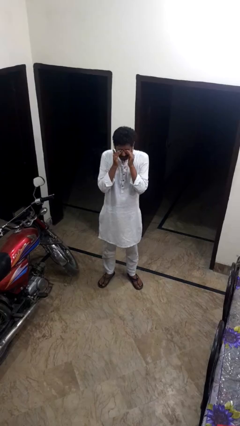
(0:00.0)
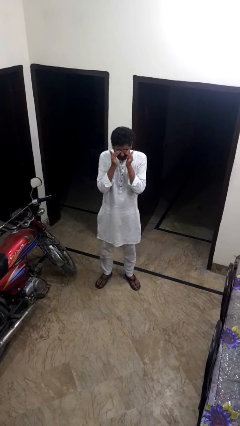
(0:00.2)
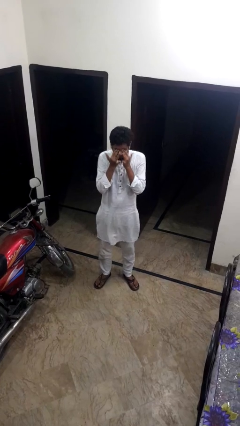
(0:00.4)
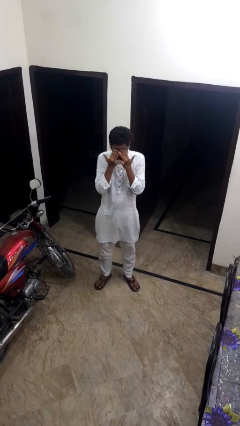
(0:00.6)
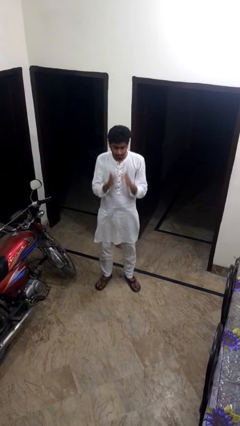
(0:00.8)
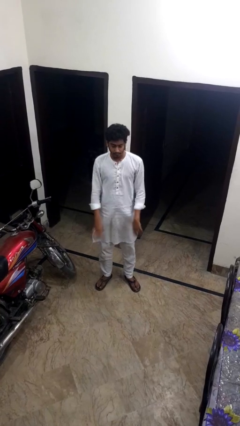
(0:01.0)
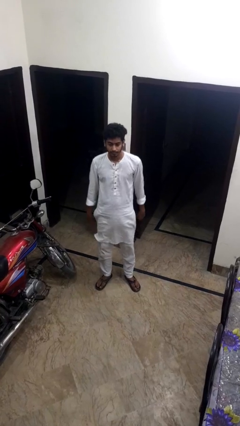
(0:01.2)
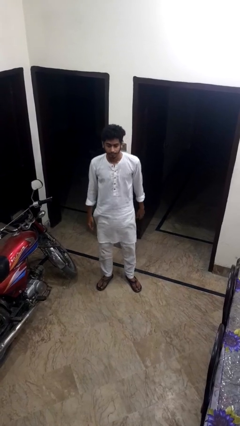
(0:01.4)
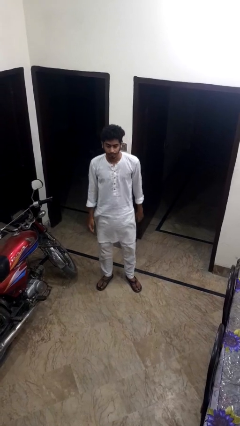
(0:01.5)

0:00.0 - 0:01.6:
person rubs eyes

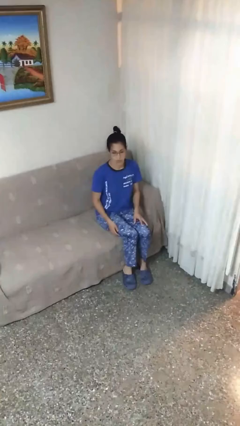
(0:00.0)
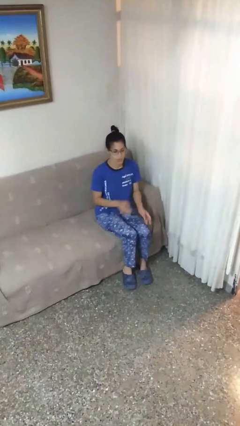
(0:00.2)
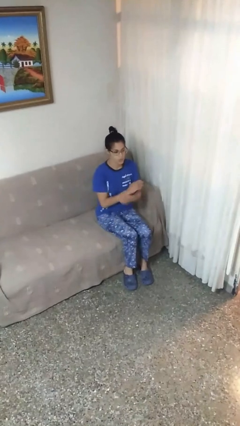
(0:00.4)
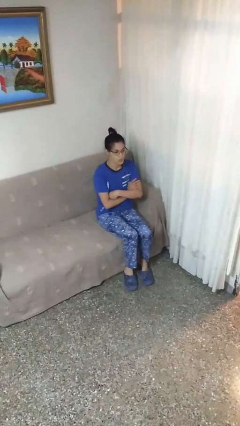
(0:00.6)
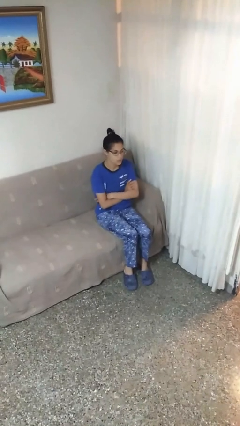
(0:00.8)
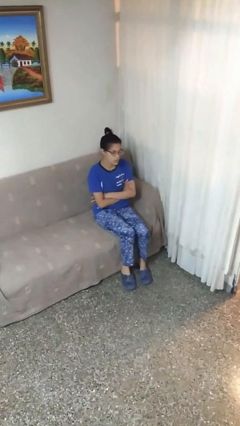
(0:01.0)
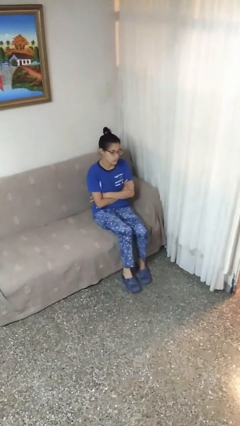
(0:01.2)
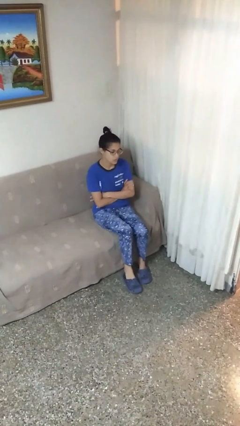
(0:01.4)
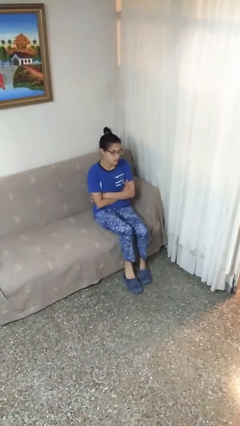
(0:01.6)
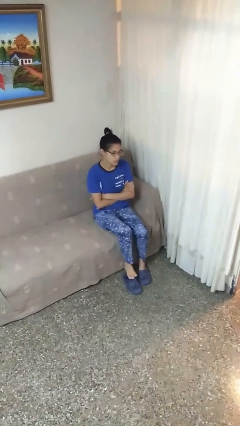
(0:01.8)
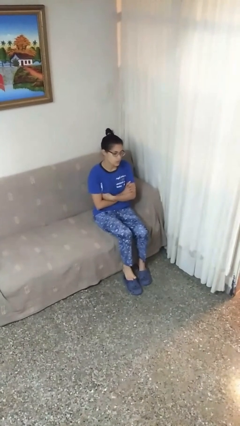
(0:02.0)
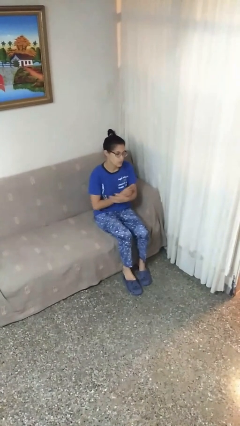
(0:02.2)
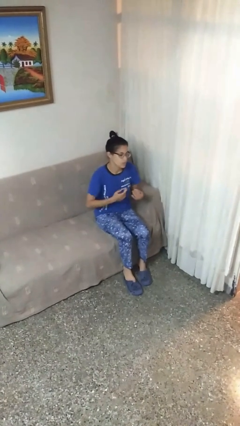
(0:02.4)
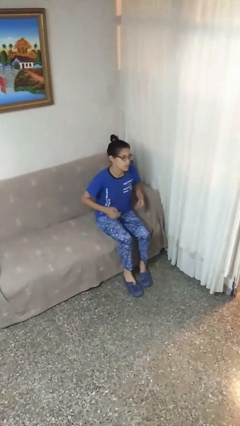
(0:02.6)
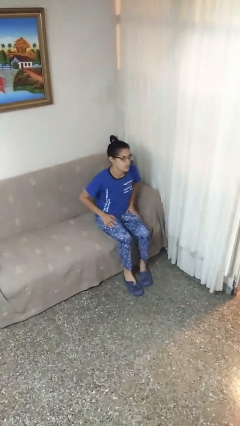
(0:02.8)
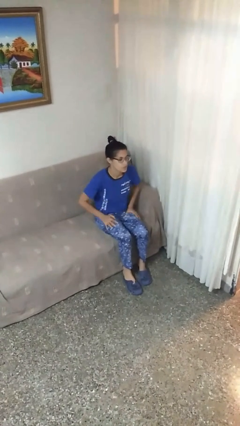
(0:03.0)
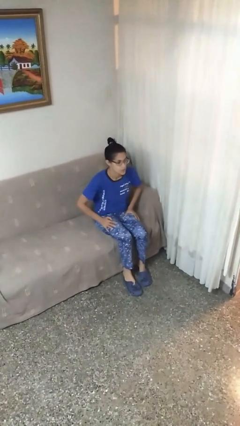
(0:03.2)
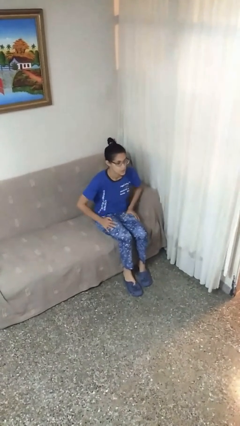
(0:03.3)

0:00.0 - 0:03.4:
person crosses arms

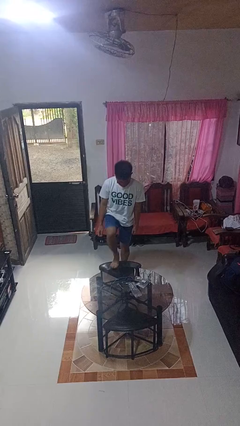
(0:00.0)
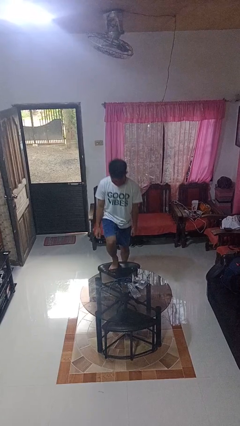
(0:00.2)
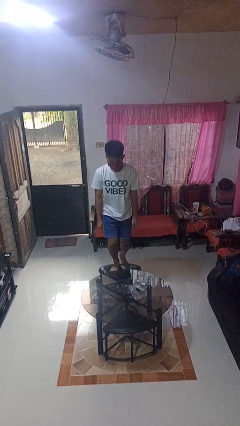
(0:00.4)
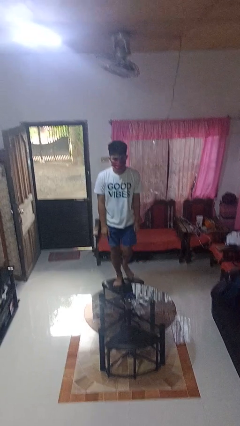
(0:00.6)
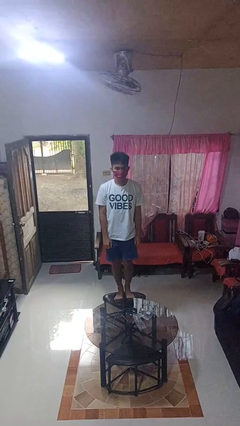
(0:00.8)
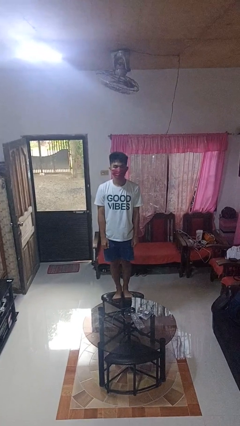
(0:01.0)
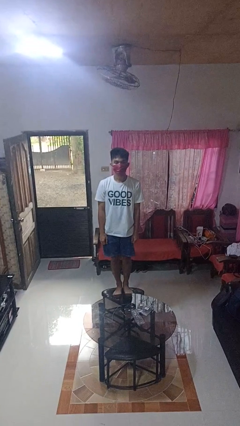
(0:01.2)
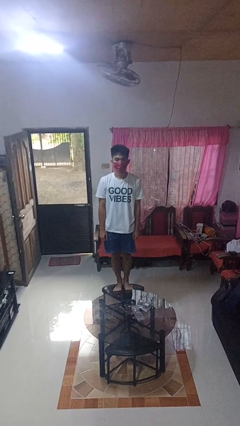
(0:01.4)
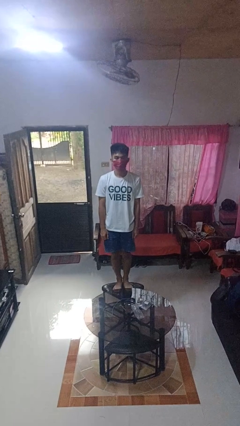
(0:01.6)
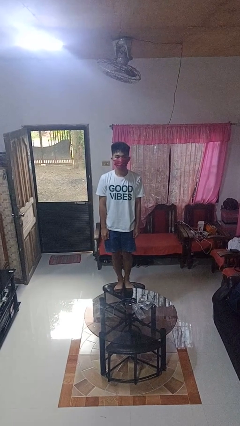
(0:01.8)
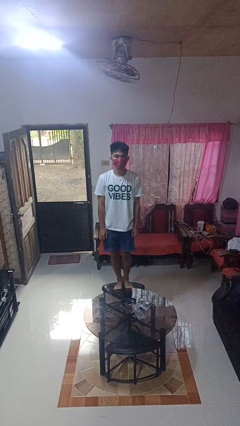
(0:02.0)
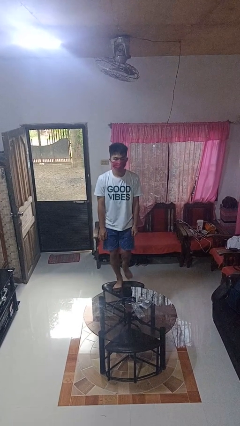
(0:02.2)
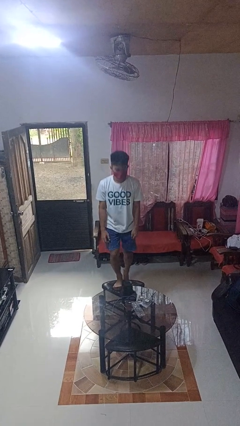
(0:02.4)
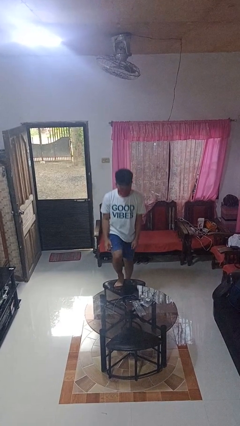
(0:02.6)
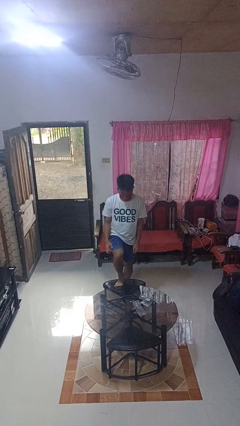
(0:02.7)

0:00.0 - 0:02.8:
person climbs on chair

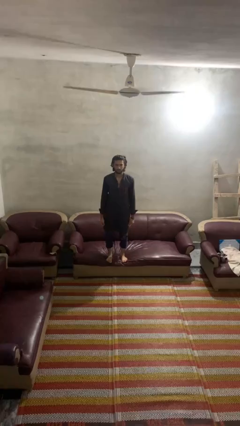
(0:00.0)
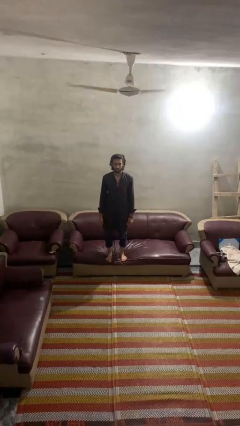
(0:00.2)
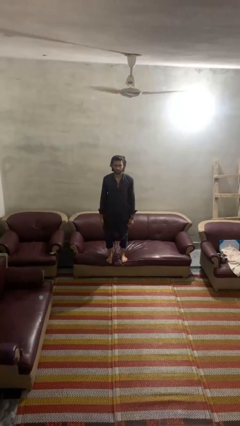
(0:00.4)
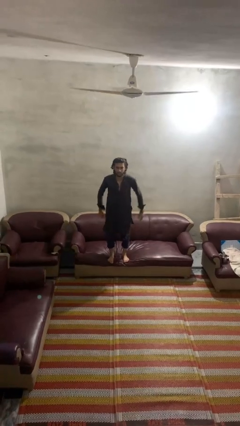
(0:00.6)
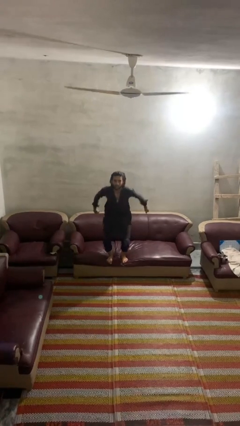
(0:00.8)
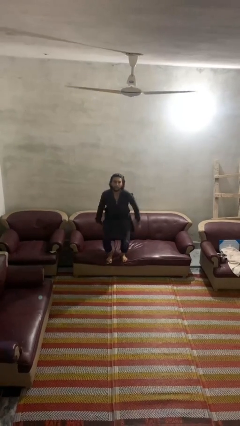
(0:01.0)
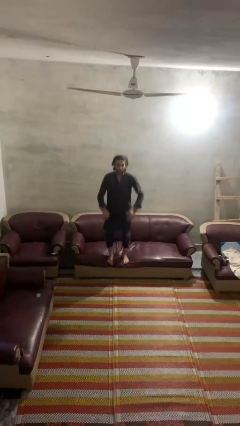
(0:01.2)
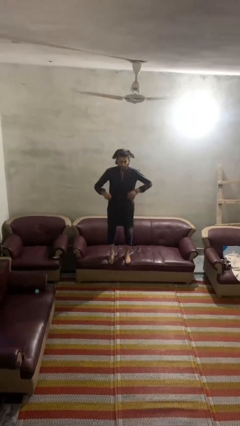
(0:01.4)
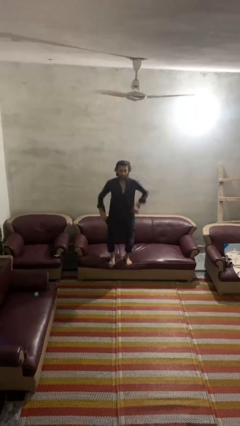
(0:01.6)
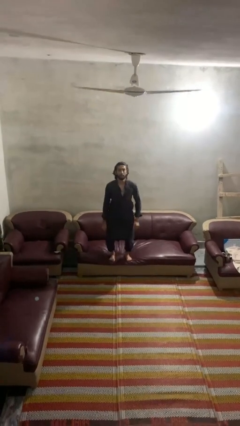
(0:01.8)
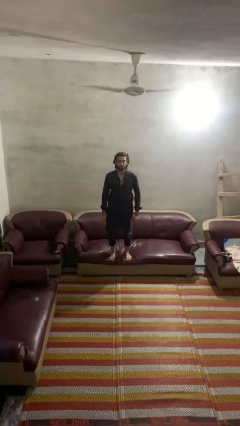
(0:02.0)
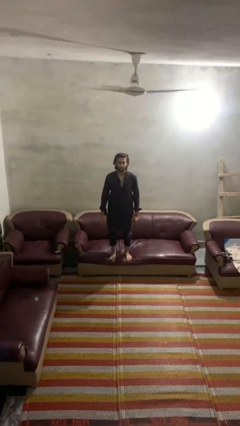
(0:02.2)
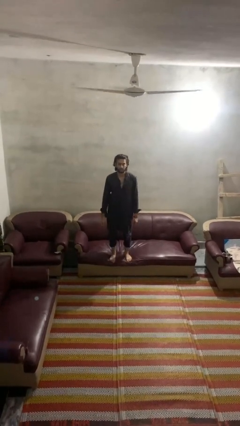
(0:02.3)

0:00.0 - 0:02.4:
person jumps on couch

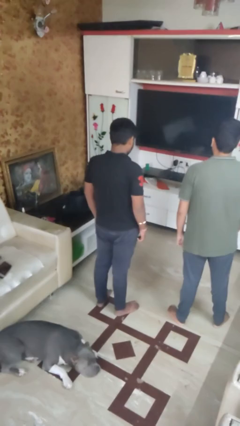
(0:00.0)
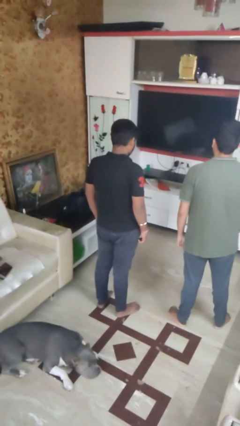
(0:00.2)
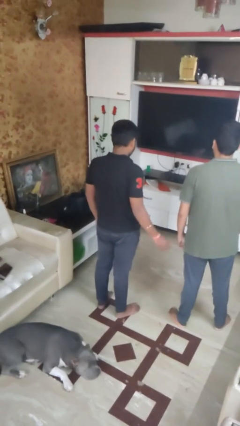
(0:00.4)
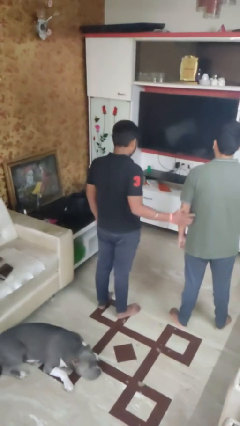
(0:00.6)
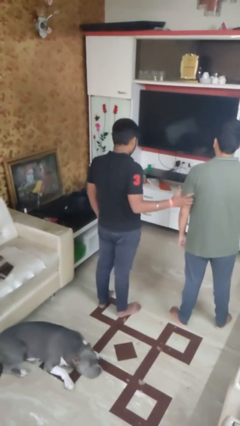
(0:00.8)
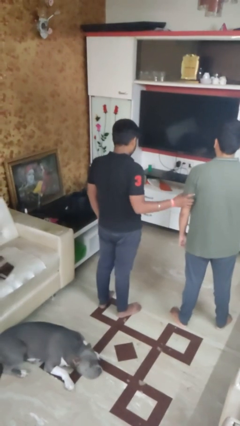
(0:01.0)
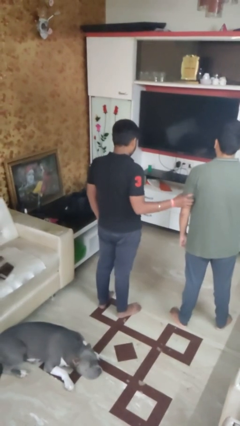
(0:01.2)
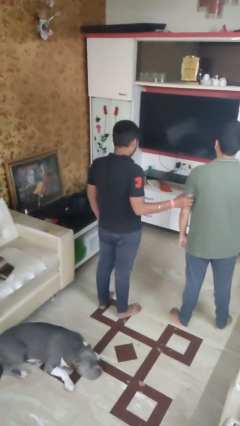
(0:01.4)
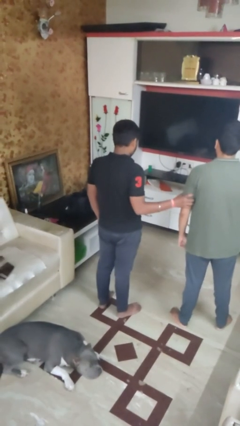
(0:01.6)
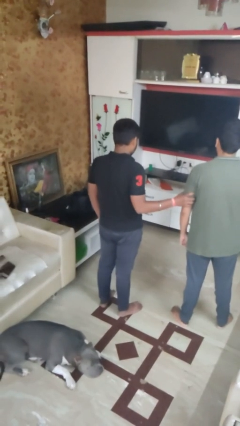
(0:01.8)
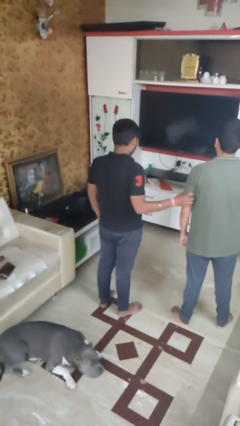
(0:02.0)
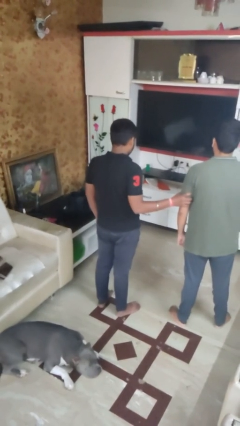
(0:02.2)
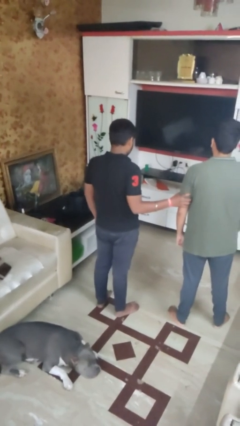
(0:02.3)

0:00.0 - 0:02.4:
person grabs person by bicep

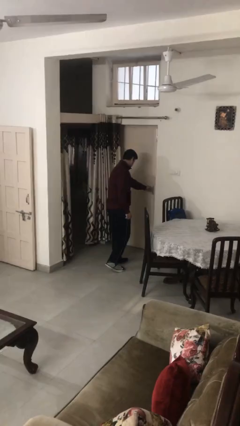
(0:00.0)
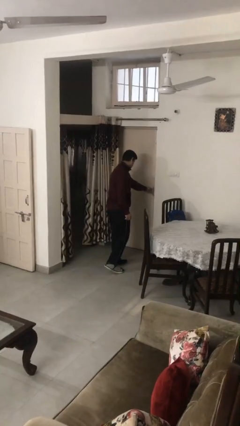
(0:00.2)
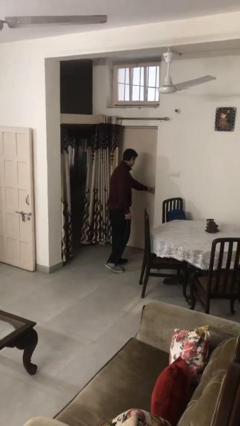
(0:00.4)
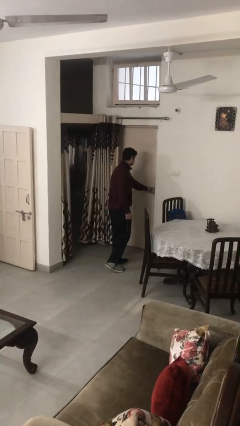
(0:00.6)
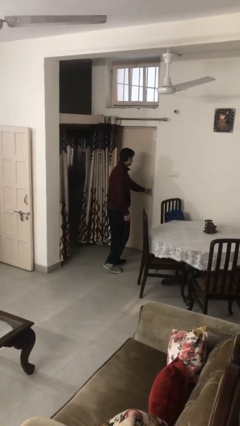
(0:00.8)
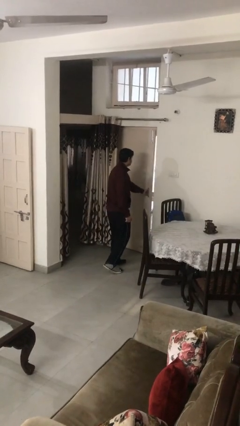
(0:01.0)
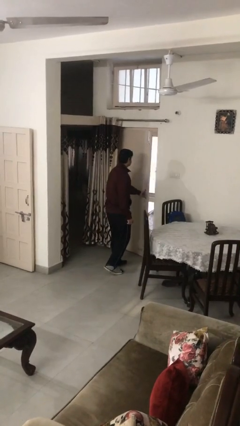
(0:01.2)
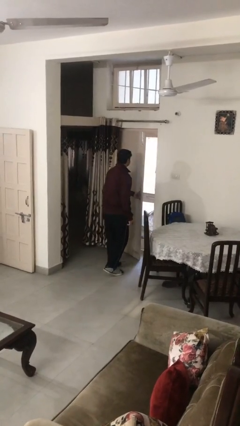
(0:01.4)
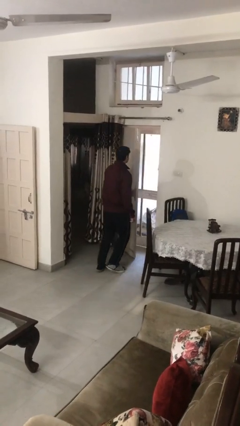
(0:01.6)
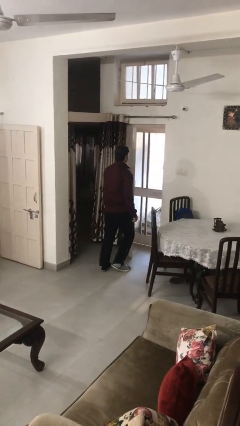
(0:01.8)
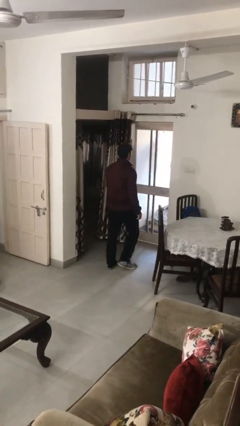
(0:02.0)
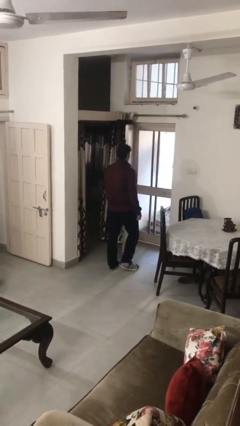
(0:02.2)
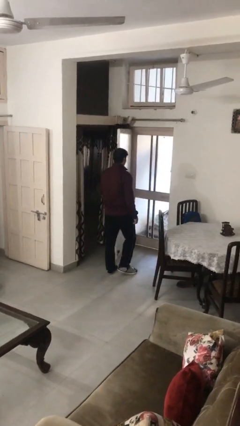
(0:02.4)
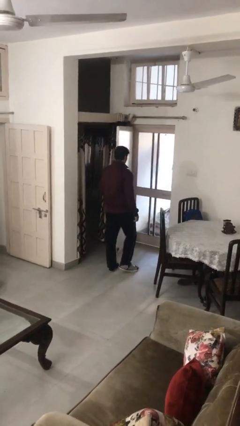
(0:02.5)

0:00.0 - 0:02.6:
person opens facility door

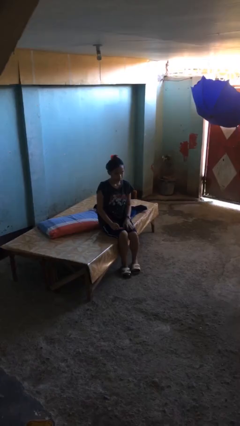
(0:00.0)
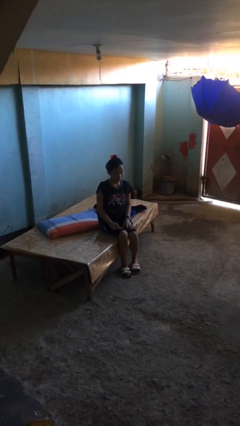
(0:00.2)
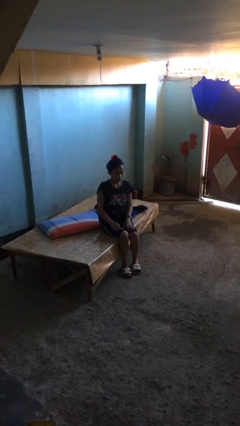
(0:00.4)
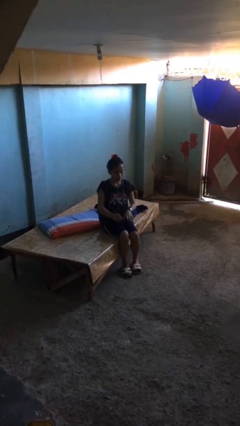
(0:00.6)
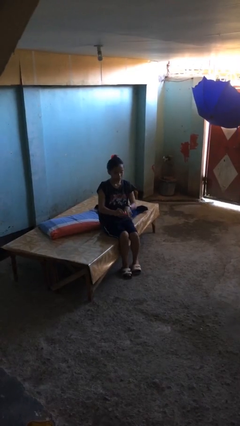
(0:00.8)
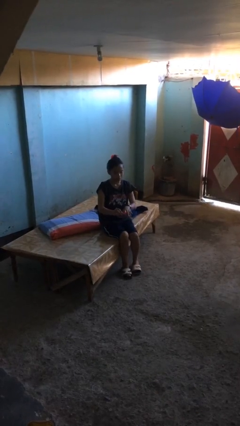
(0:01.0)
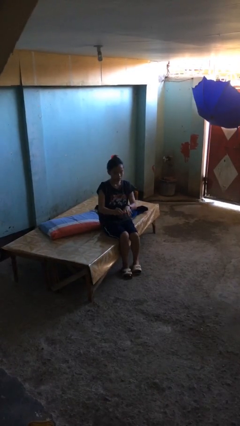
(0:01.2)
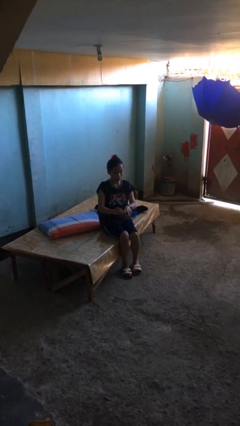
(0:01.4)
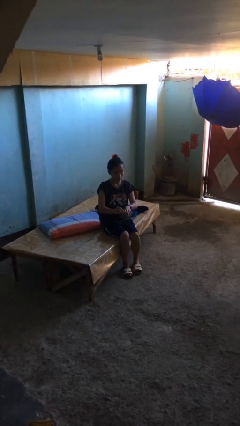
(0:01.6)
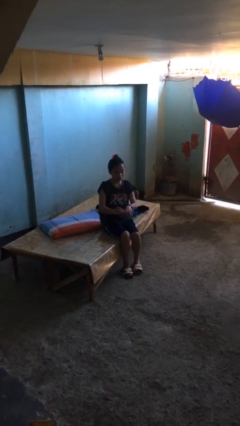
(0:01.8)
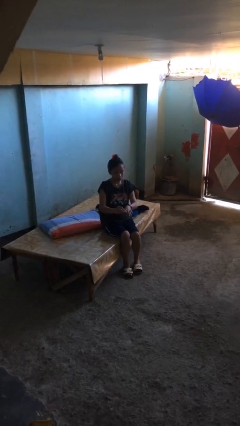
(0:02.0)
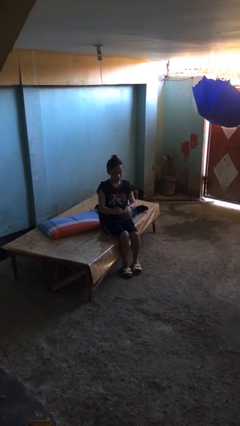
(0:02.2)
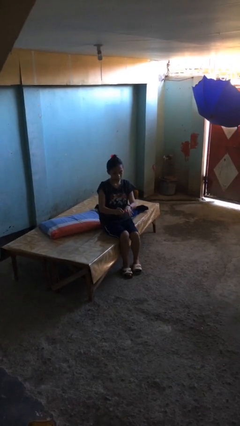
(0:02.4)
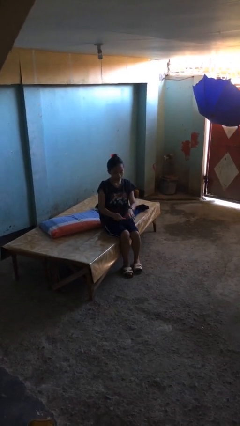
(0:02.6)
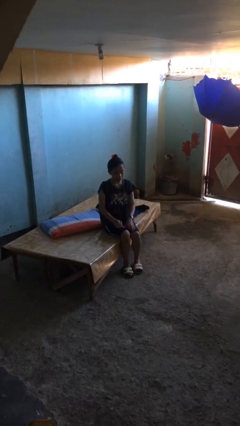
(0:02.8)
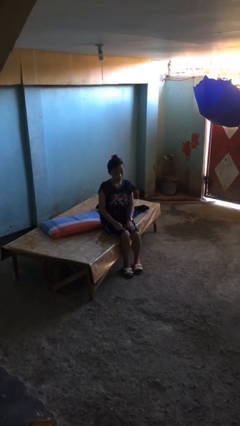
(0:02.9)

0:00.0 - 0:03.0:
person files fingernails
